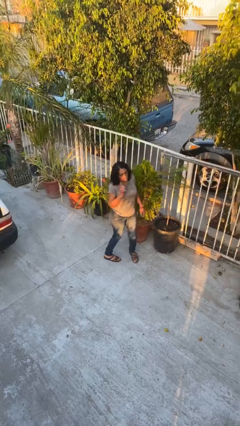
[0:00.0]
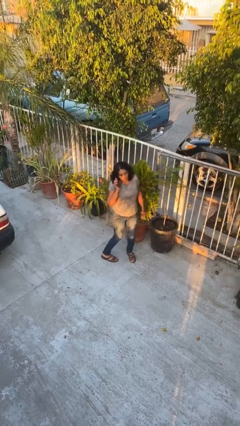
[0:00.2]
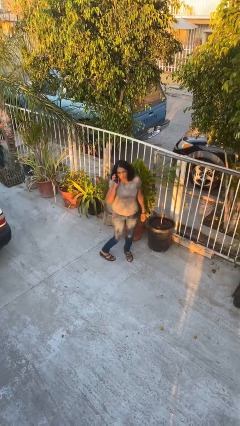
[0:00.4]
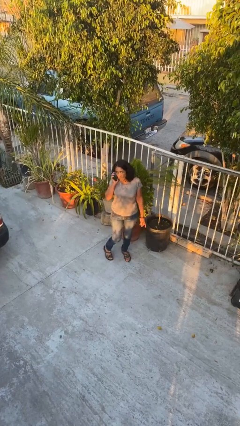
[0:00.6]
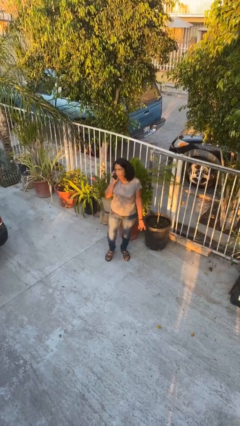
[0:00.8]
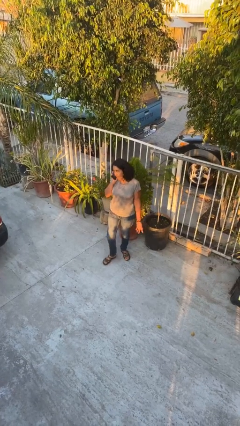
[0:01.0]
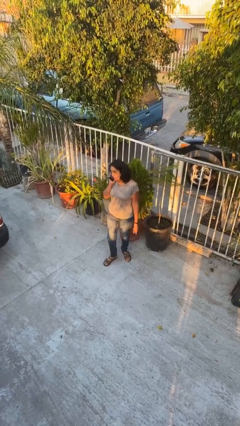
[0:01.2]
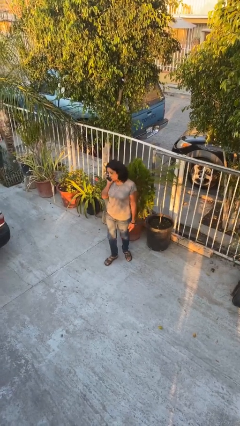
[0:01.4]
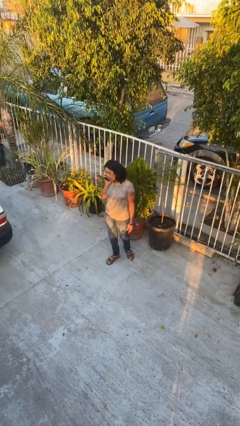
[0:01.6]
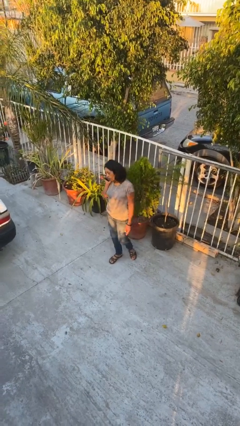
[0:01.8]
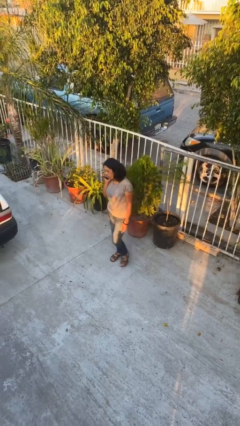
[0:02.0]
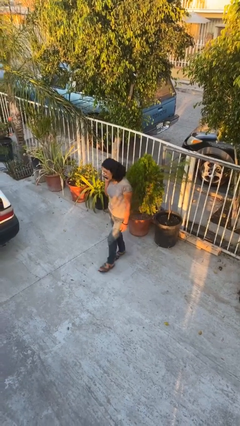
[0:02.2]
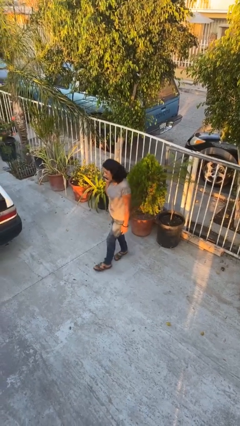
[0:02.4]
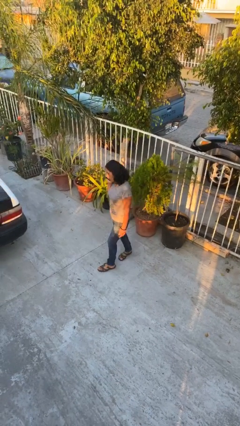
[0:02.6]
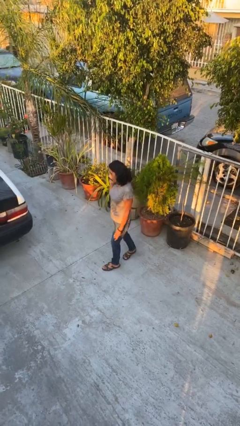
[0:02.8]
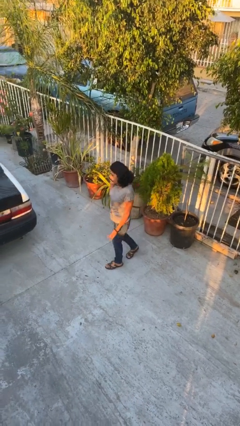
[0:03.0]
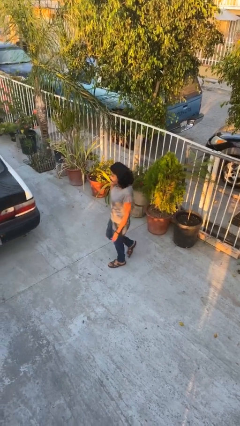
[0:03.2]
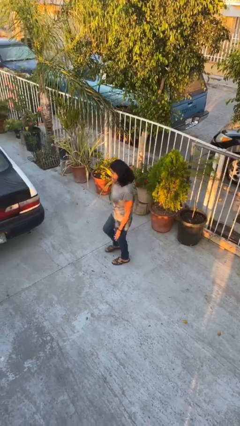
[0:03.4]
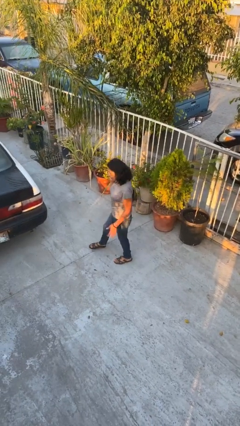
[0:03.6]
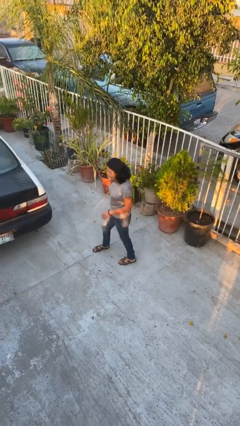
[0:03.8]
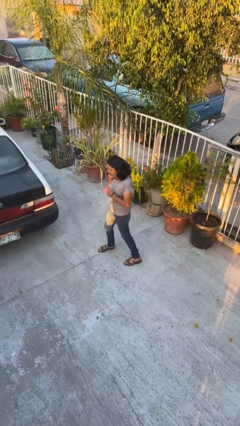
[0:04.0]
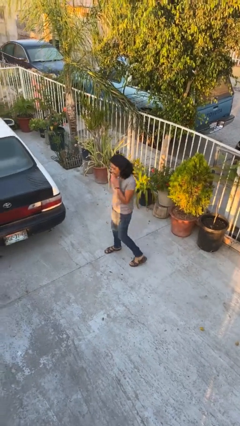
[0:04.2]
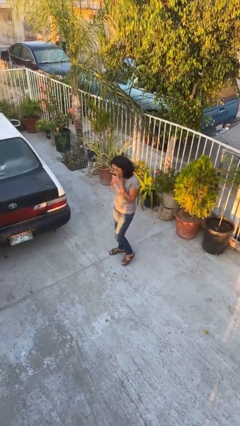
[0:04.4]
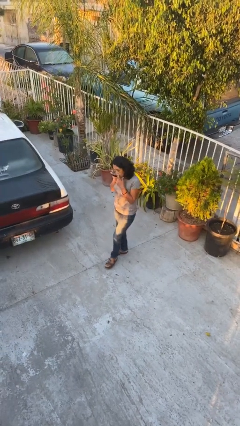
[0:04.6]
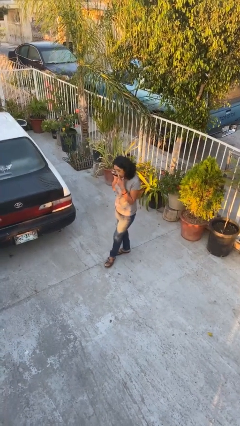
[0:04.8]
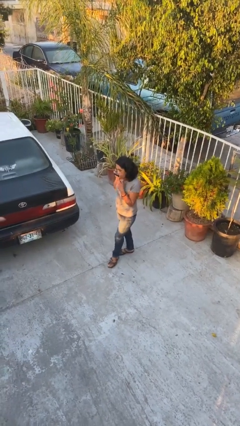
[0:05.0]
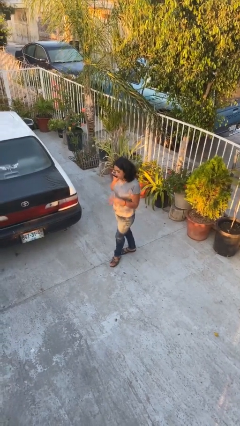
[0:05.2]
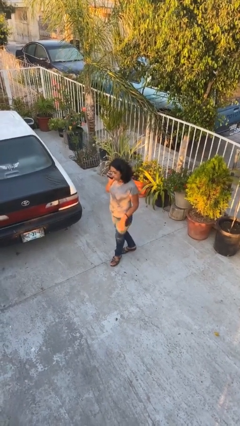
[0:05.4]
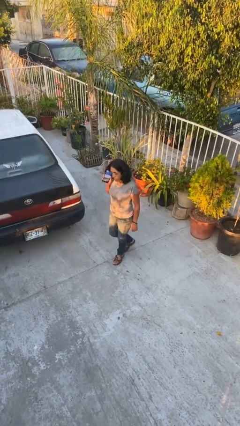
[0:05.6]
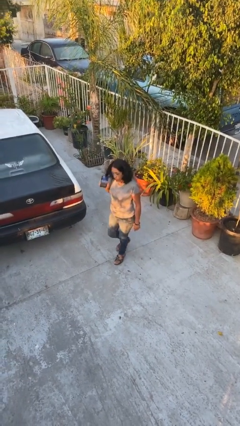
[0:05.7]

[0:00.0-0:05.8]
person talks on phone

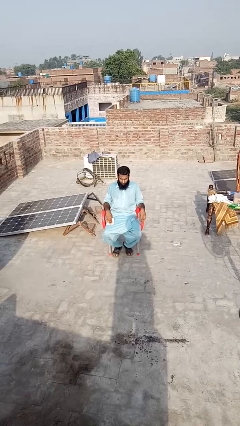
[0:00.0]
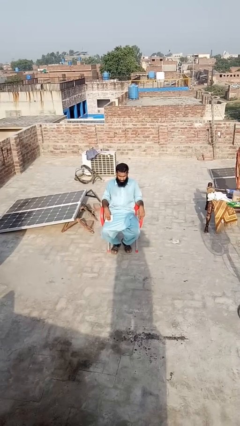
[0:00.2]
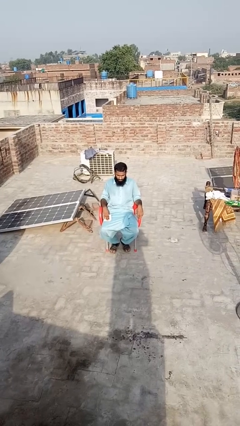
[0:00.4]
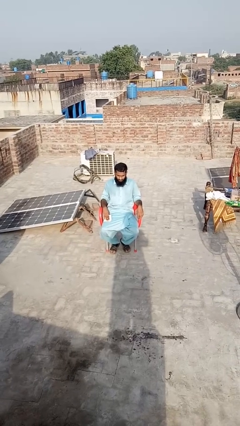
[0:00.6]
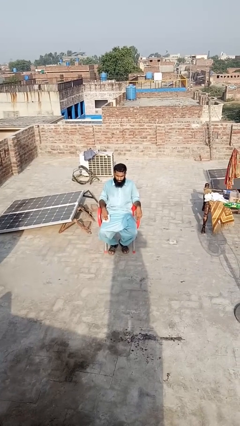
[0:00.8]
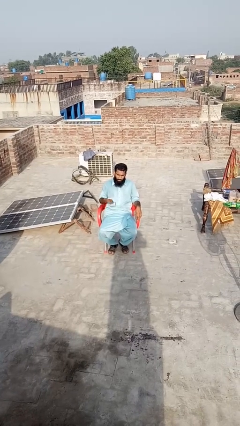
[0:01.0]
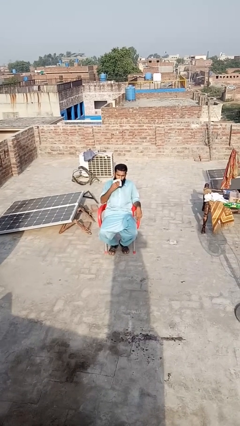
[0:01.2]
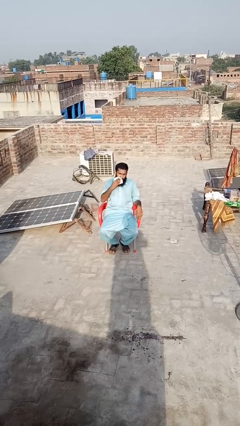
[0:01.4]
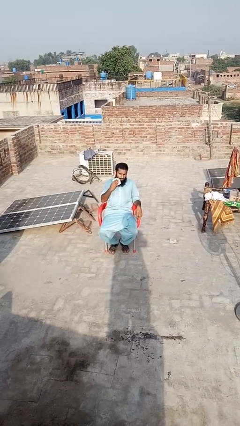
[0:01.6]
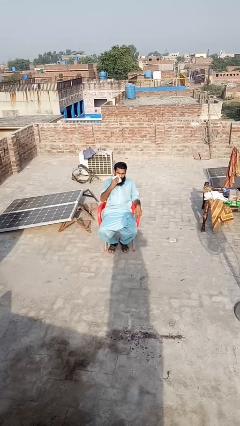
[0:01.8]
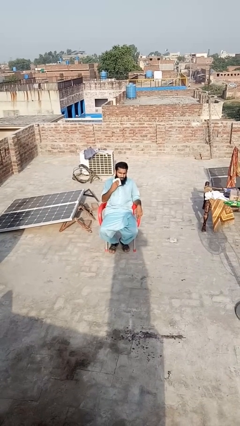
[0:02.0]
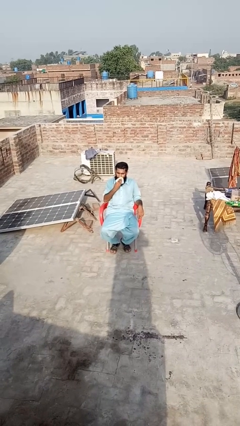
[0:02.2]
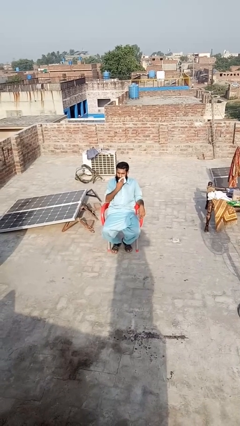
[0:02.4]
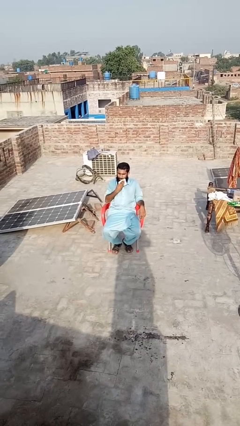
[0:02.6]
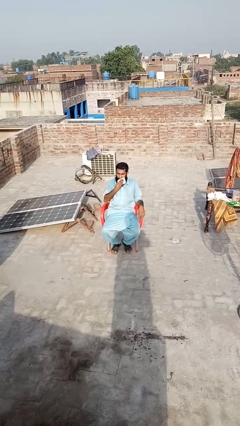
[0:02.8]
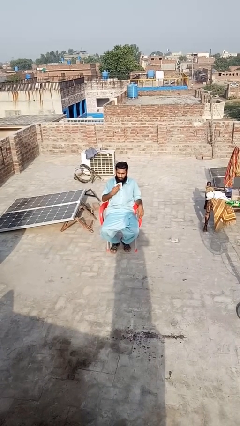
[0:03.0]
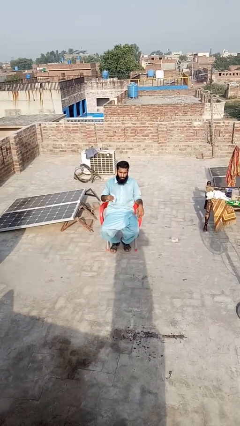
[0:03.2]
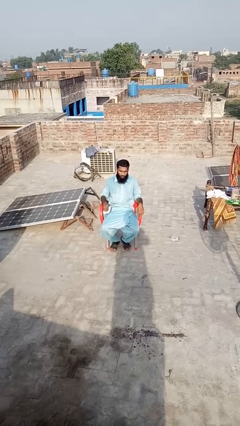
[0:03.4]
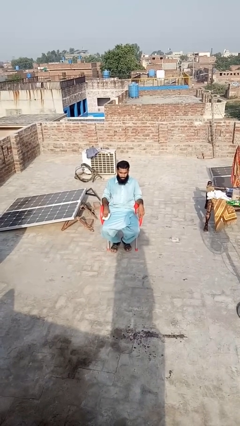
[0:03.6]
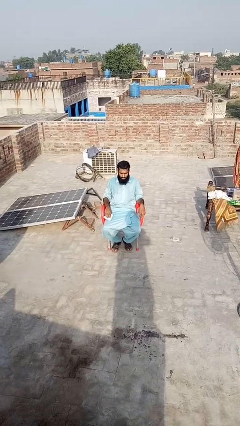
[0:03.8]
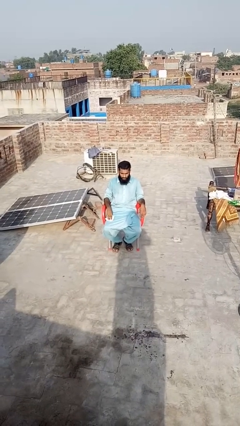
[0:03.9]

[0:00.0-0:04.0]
person wipes mouth with napkin

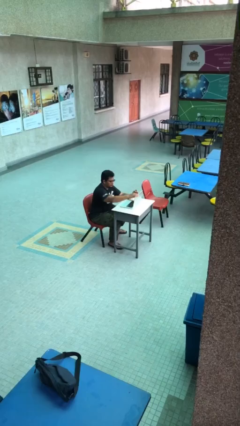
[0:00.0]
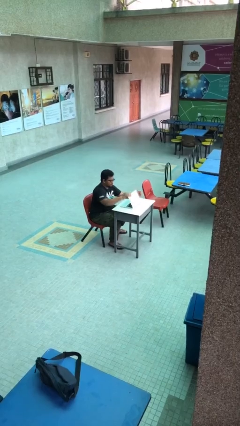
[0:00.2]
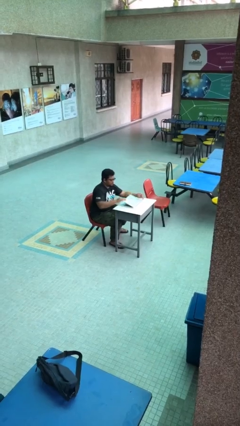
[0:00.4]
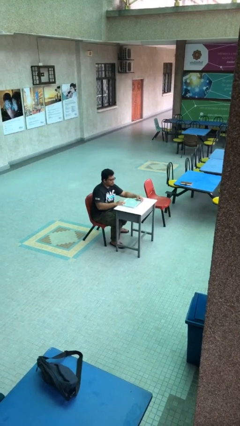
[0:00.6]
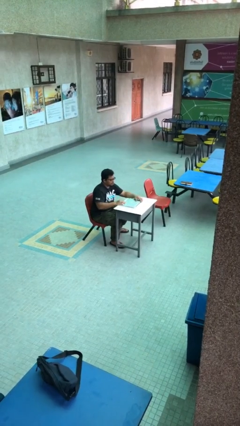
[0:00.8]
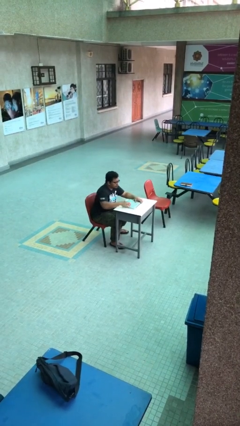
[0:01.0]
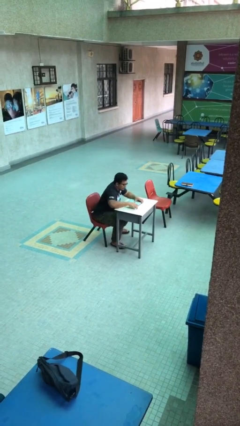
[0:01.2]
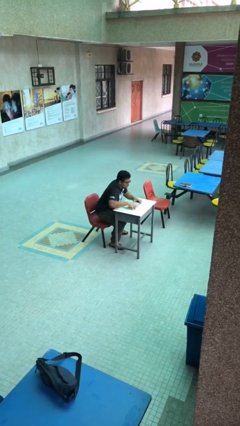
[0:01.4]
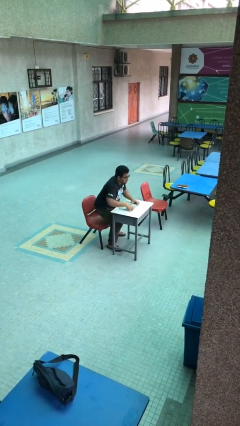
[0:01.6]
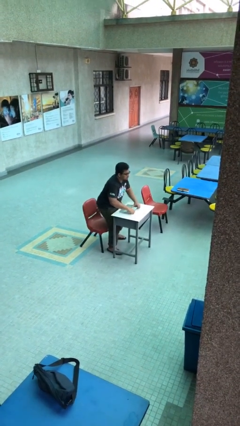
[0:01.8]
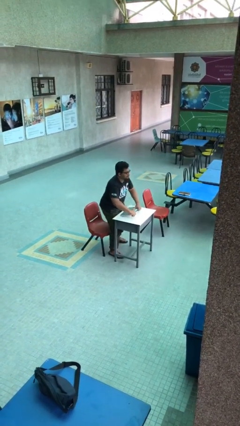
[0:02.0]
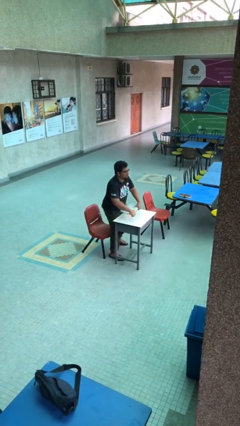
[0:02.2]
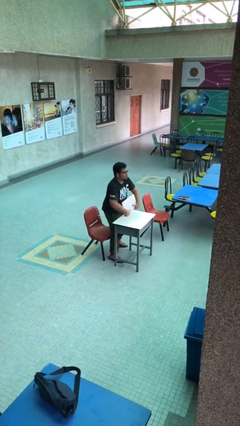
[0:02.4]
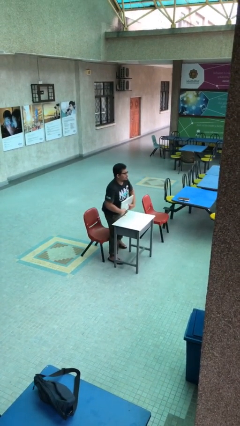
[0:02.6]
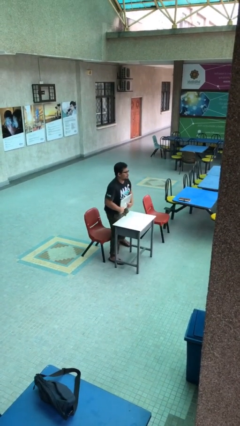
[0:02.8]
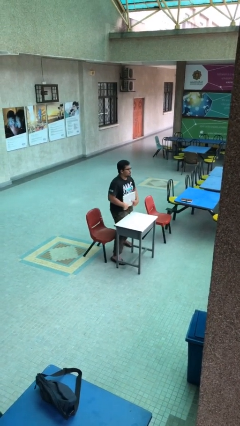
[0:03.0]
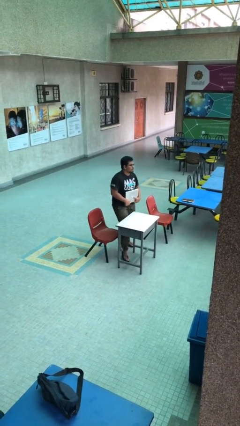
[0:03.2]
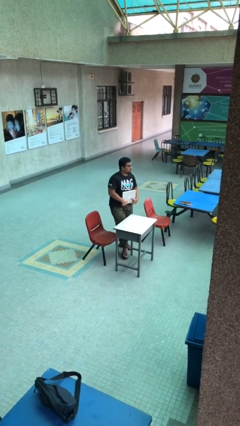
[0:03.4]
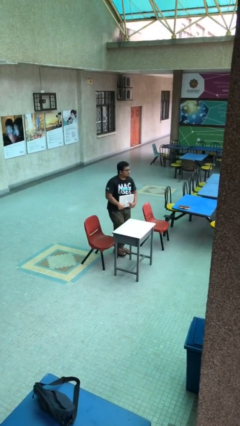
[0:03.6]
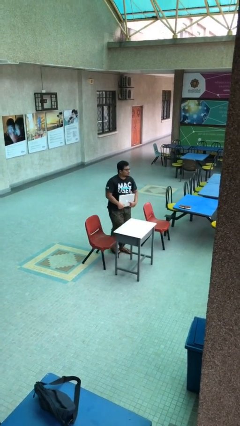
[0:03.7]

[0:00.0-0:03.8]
person stands up

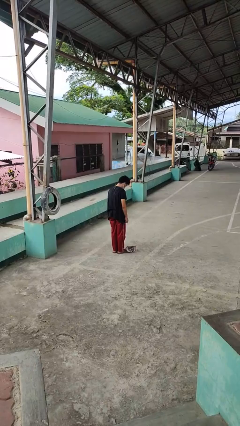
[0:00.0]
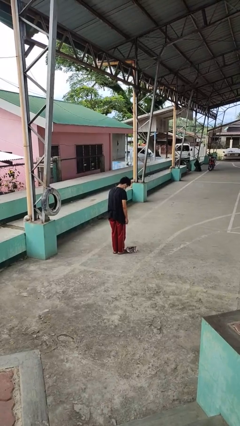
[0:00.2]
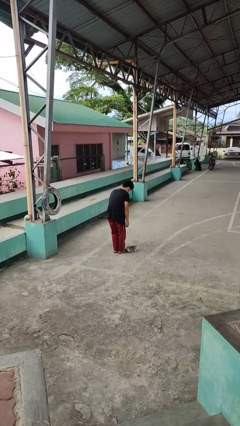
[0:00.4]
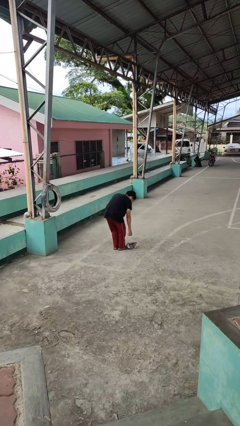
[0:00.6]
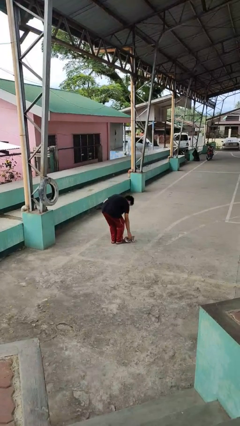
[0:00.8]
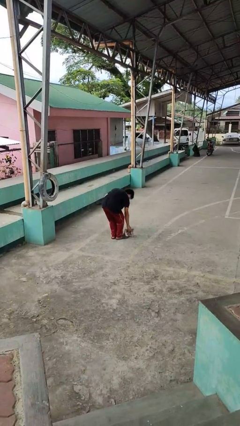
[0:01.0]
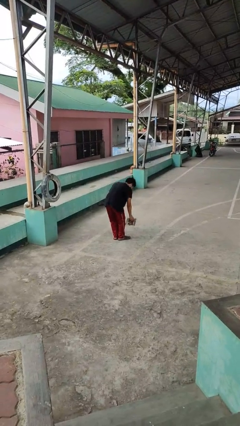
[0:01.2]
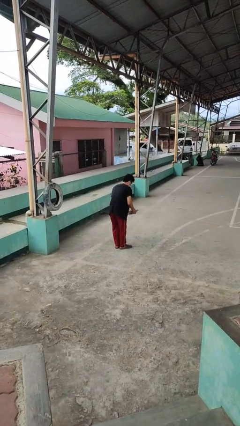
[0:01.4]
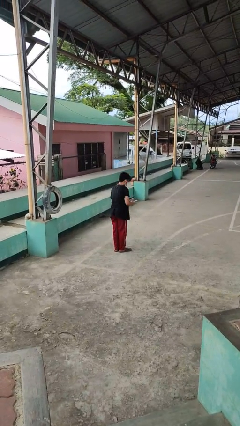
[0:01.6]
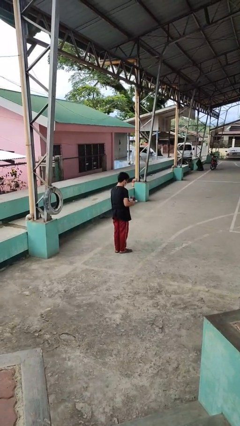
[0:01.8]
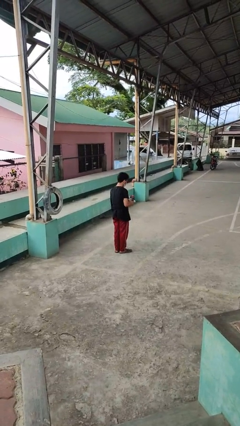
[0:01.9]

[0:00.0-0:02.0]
person picks up object from floor

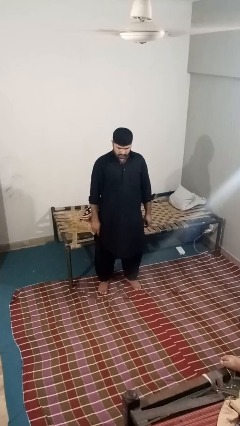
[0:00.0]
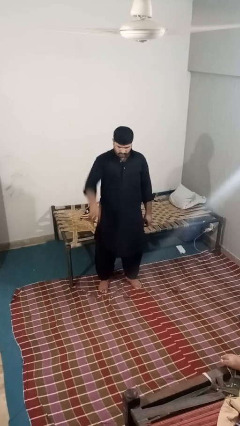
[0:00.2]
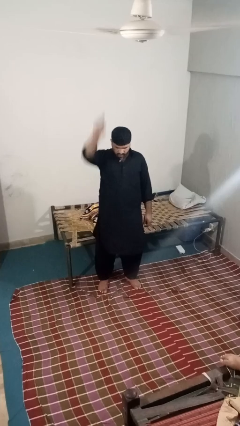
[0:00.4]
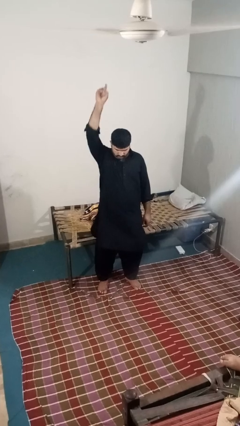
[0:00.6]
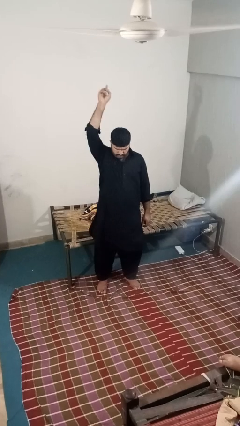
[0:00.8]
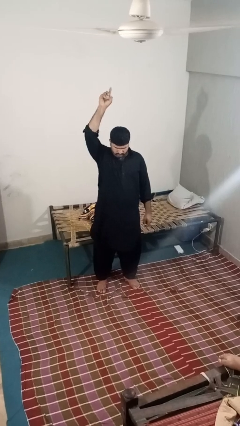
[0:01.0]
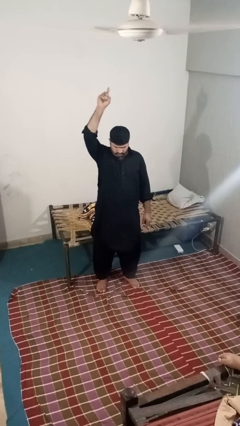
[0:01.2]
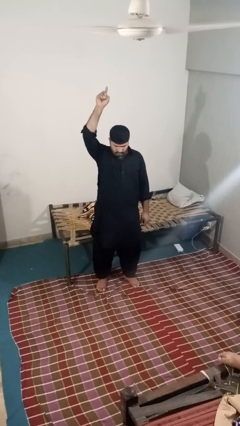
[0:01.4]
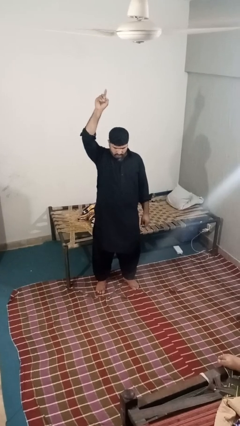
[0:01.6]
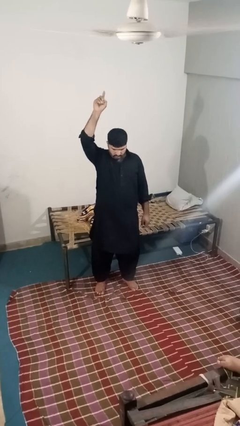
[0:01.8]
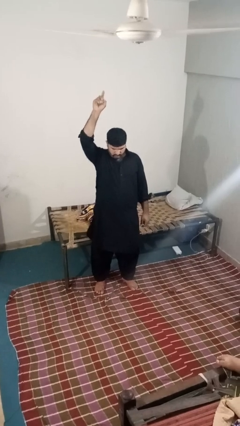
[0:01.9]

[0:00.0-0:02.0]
person gestures swipe up
